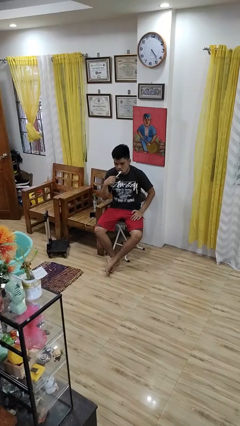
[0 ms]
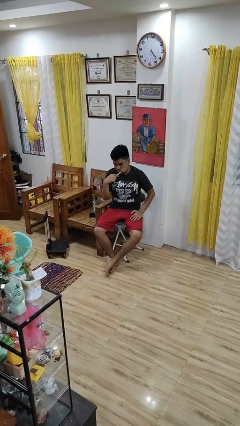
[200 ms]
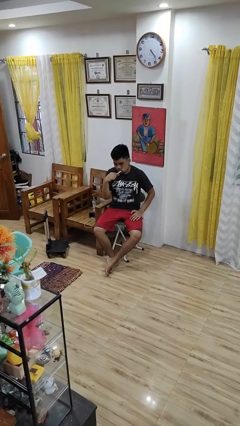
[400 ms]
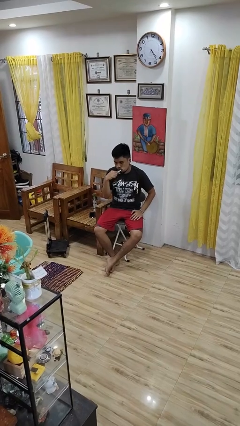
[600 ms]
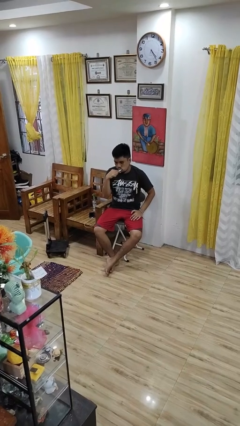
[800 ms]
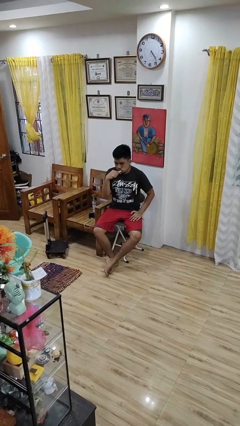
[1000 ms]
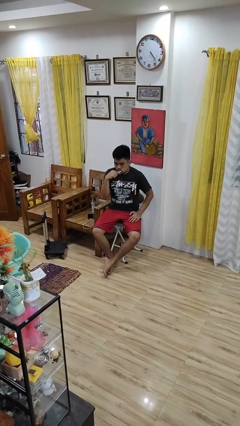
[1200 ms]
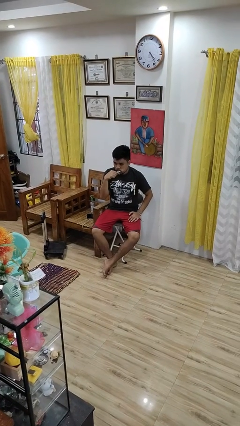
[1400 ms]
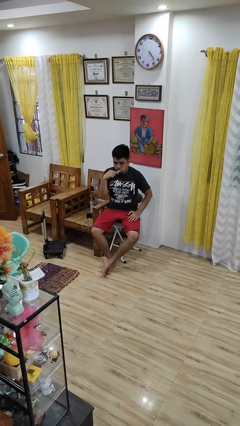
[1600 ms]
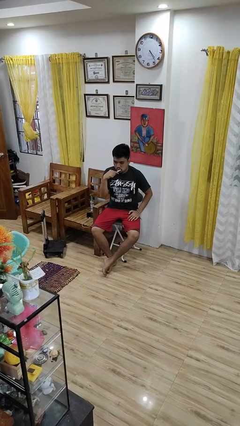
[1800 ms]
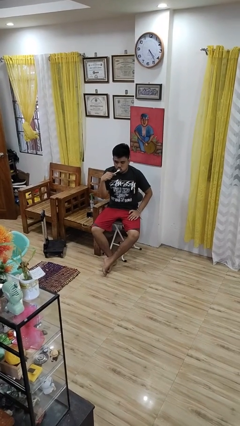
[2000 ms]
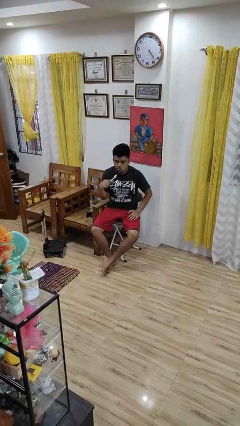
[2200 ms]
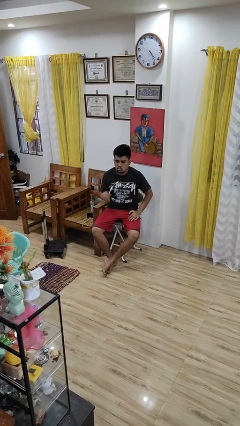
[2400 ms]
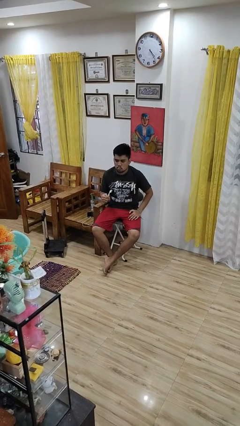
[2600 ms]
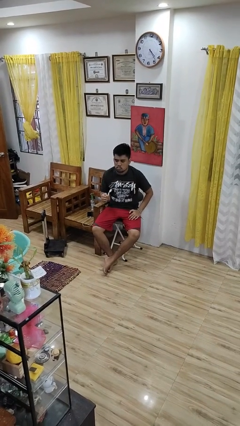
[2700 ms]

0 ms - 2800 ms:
person brushes teeth

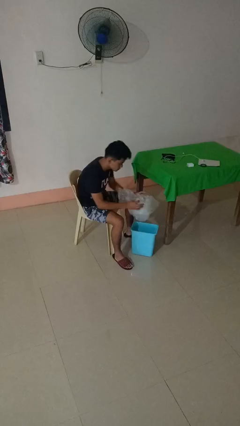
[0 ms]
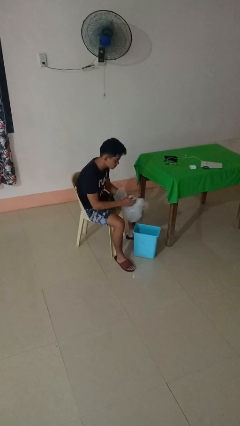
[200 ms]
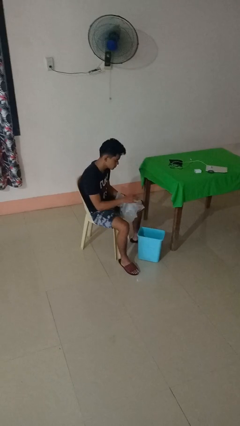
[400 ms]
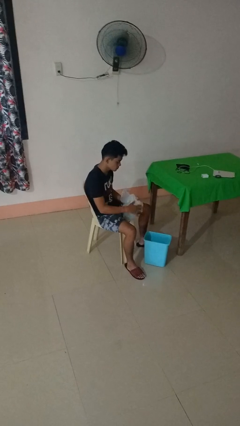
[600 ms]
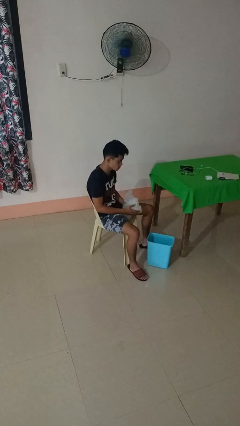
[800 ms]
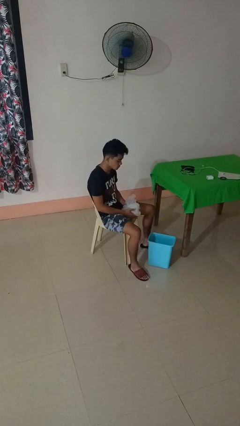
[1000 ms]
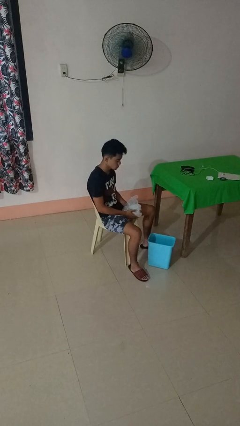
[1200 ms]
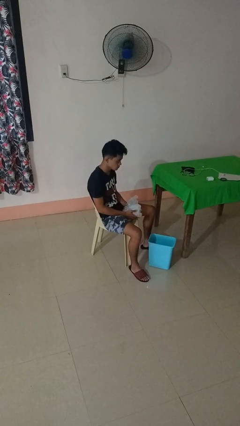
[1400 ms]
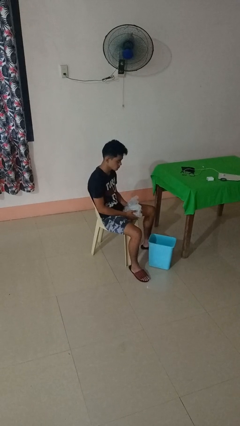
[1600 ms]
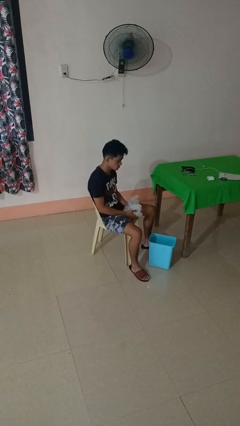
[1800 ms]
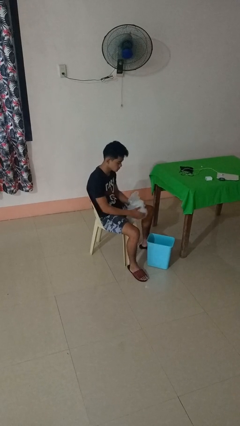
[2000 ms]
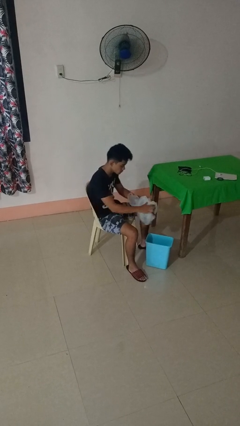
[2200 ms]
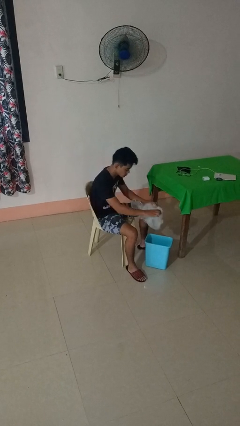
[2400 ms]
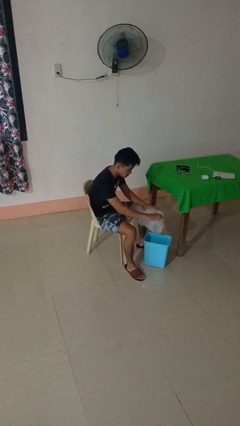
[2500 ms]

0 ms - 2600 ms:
person removes trashbag from trashcan

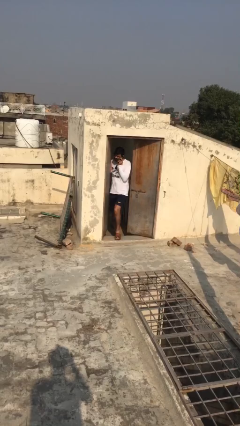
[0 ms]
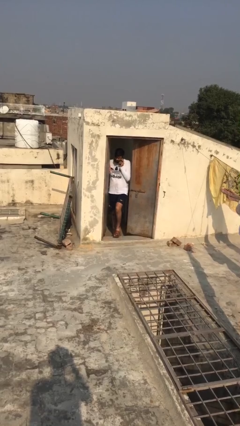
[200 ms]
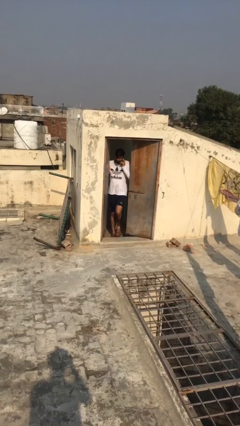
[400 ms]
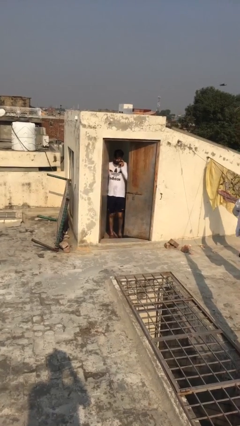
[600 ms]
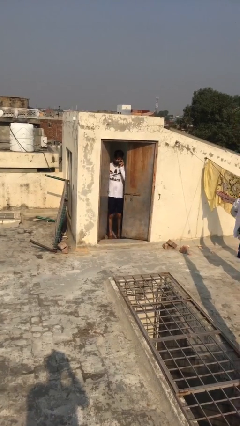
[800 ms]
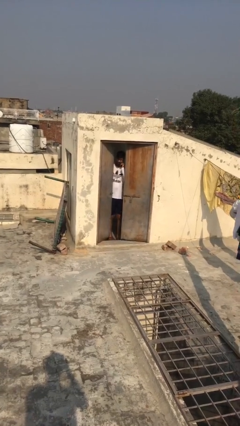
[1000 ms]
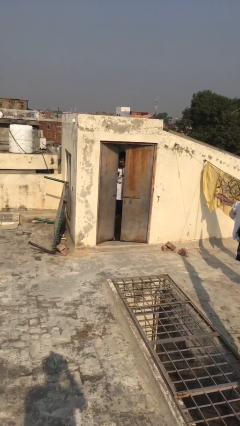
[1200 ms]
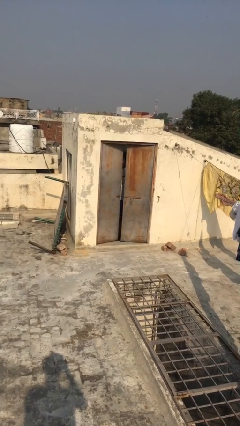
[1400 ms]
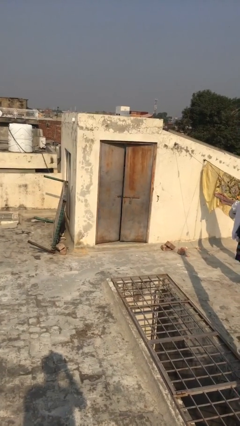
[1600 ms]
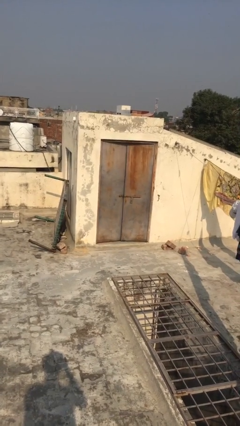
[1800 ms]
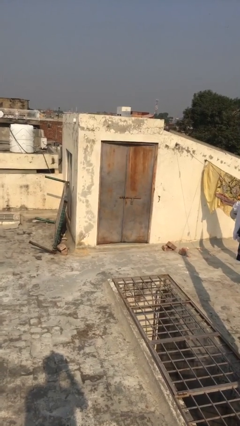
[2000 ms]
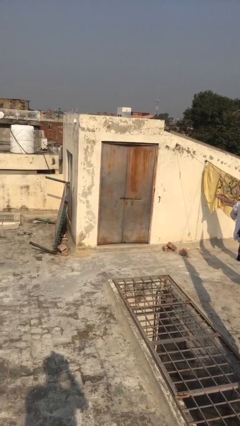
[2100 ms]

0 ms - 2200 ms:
person closes facility door

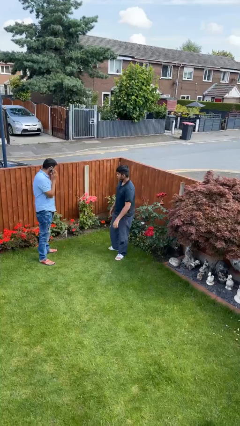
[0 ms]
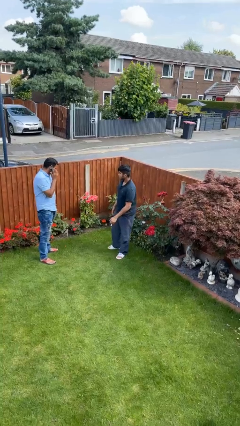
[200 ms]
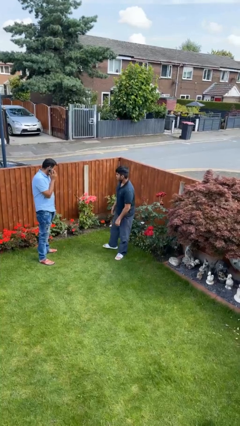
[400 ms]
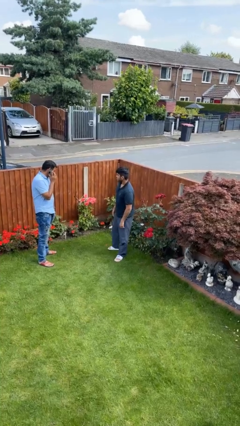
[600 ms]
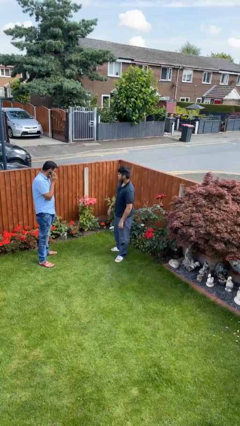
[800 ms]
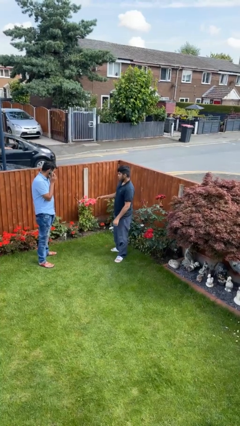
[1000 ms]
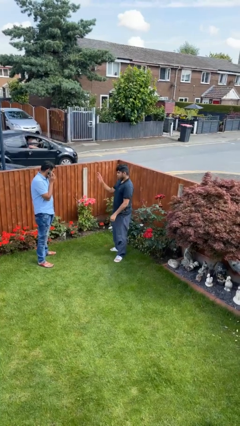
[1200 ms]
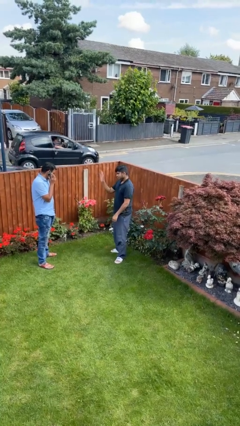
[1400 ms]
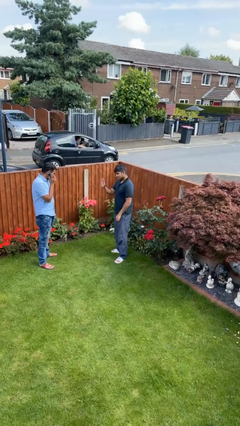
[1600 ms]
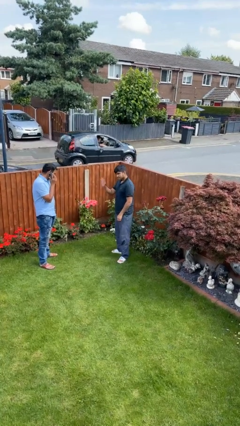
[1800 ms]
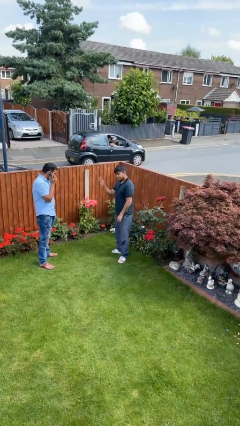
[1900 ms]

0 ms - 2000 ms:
person waves at person

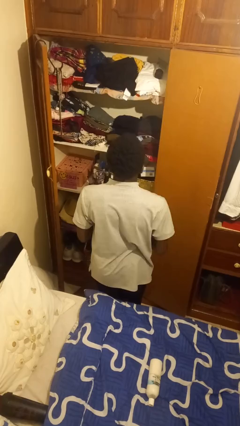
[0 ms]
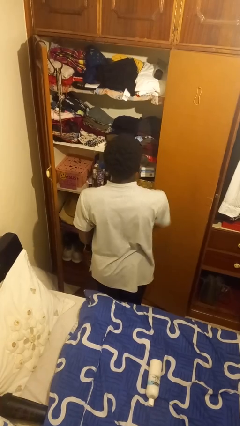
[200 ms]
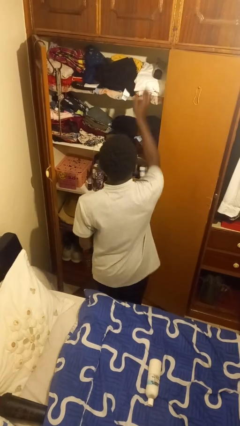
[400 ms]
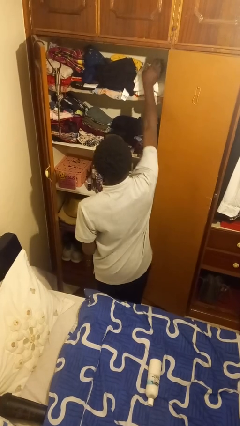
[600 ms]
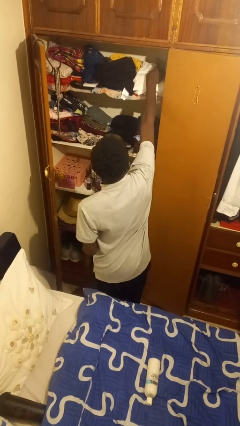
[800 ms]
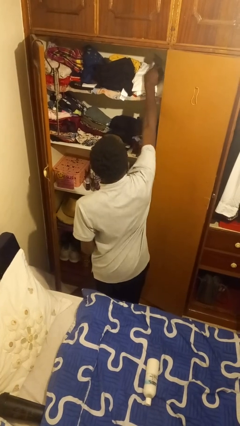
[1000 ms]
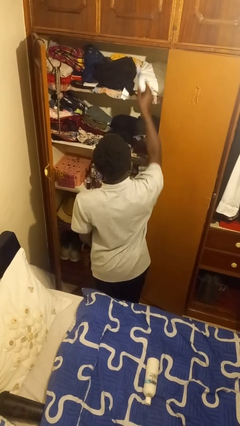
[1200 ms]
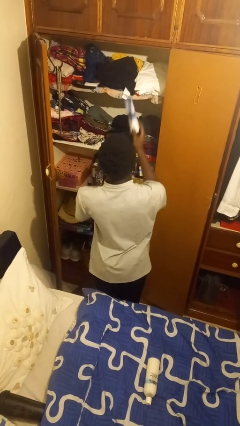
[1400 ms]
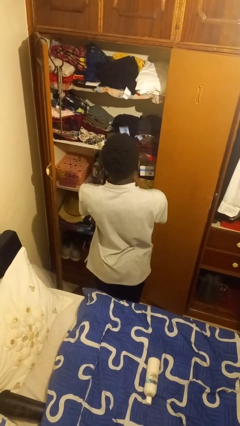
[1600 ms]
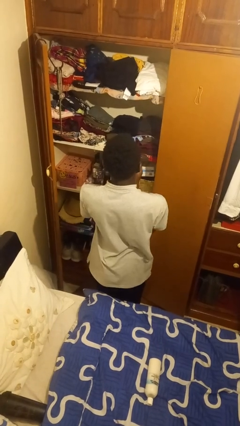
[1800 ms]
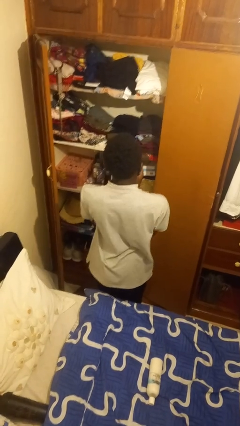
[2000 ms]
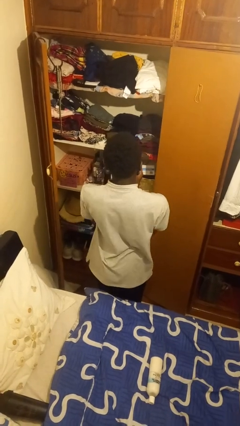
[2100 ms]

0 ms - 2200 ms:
person picks up object from shelf

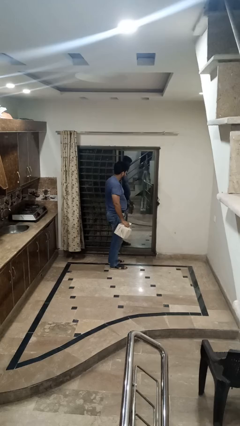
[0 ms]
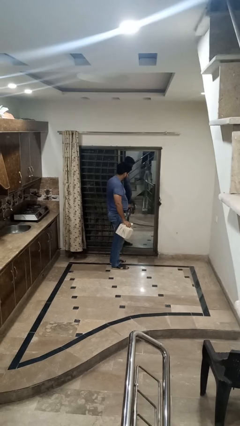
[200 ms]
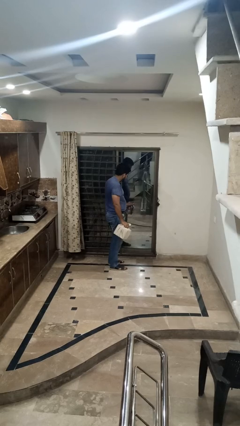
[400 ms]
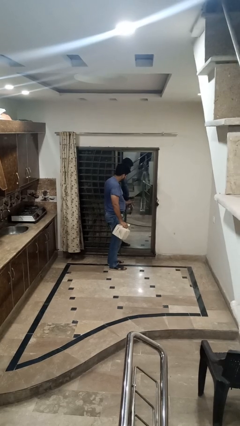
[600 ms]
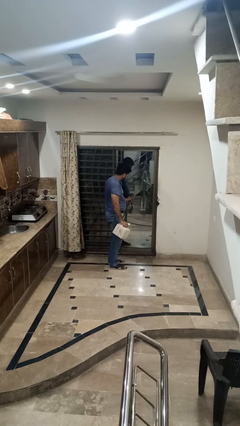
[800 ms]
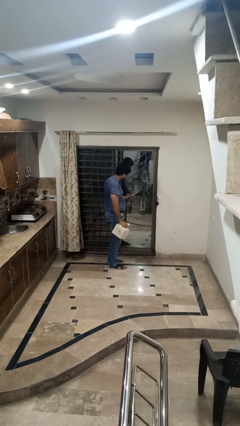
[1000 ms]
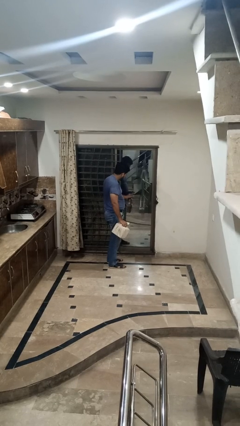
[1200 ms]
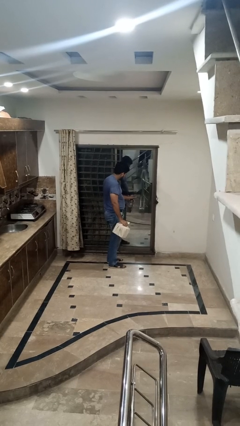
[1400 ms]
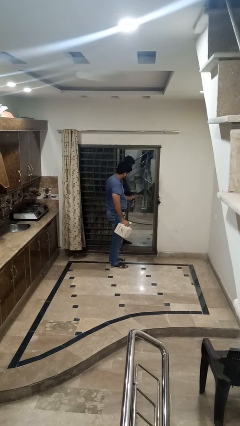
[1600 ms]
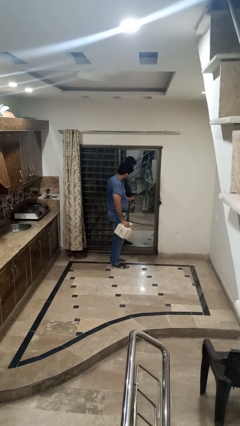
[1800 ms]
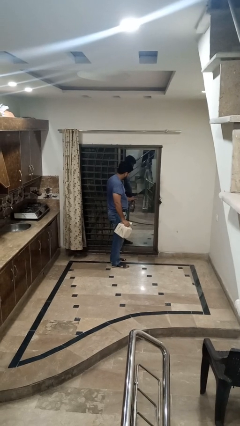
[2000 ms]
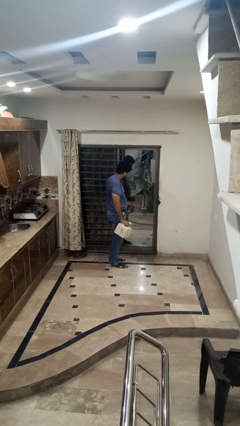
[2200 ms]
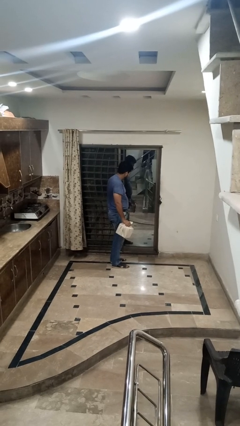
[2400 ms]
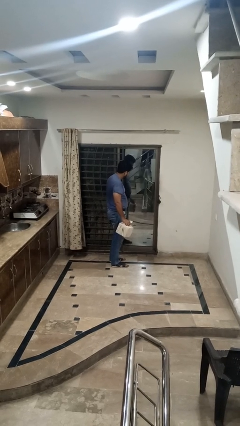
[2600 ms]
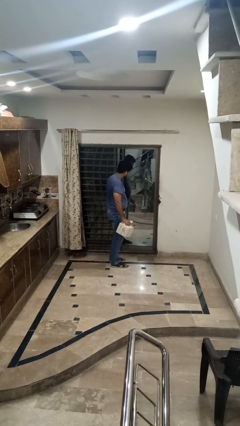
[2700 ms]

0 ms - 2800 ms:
person sprays from bottle

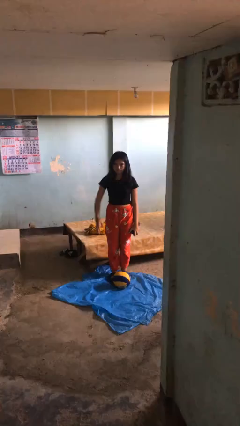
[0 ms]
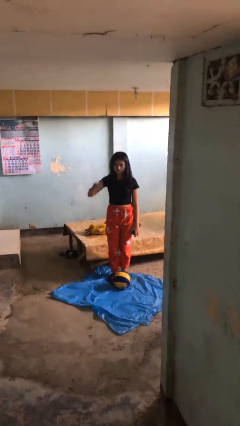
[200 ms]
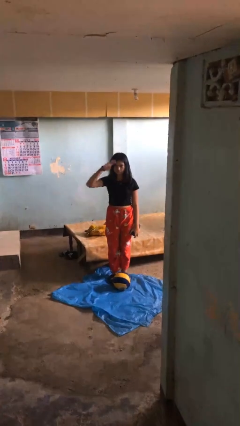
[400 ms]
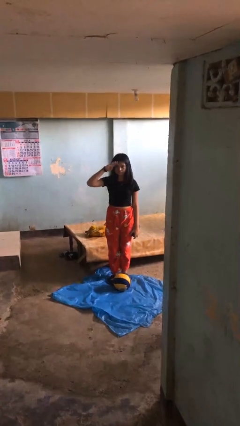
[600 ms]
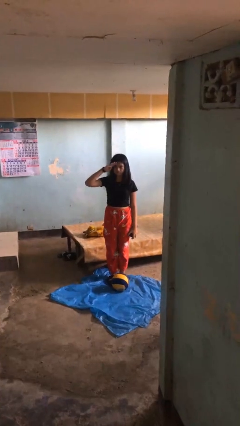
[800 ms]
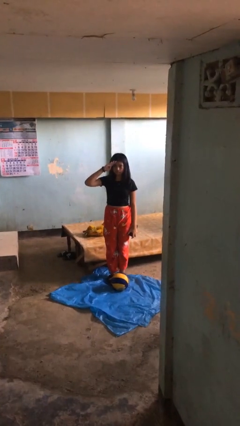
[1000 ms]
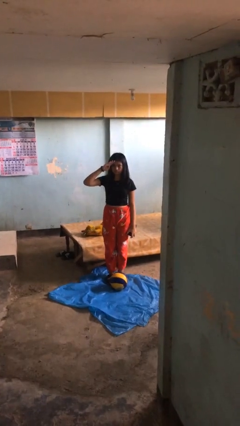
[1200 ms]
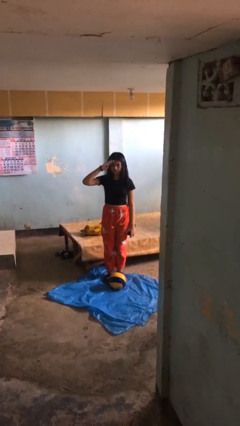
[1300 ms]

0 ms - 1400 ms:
person salutes

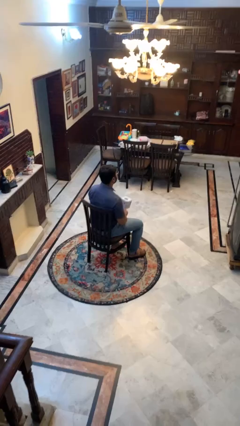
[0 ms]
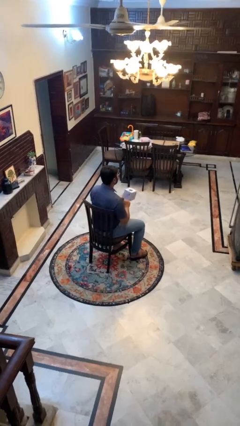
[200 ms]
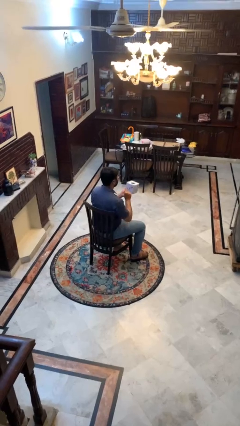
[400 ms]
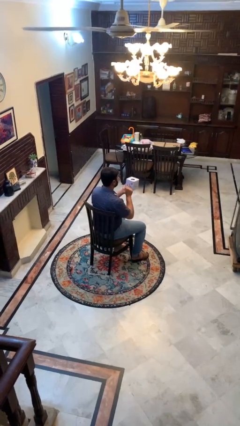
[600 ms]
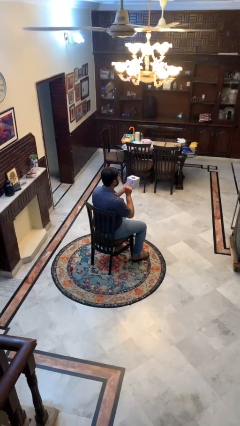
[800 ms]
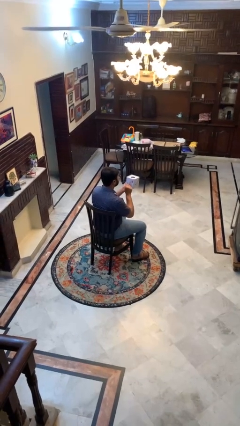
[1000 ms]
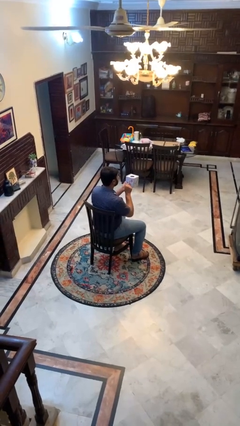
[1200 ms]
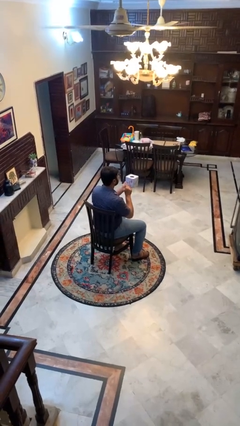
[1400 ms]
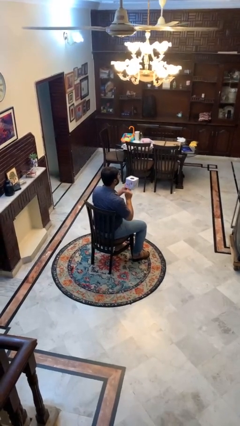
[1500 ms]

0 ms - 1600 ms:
person taps object with finger
